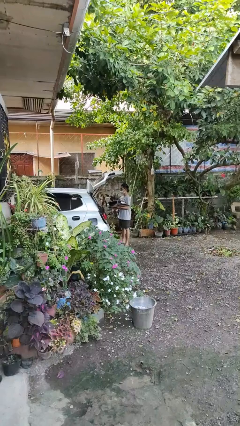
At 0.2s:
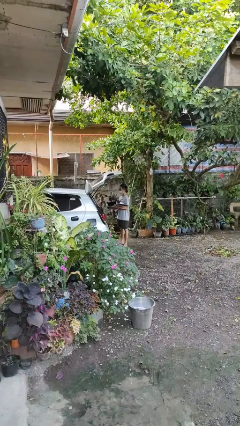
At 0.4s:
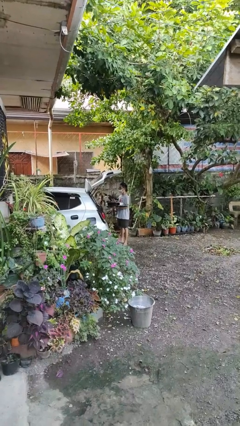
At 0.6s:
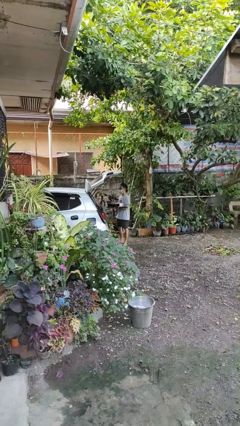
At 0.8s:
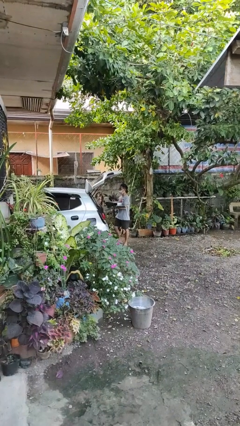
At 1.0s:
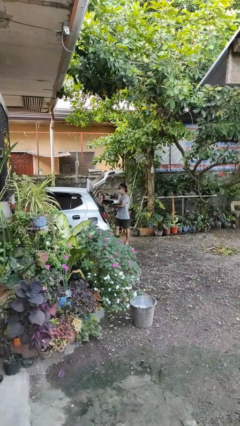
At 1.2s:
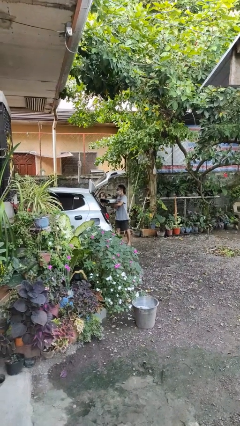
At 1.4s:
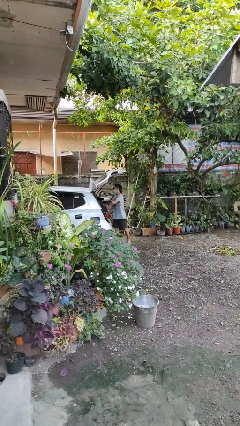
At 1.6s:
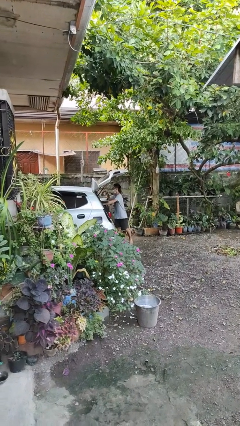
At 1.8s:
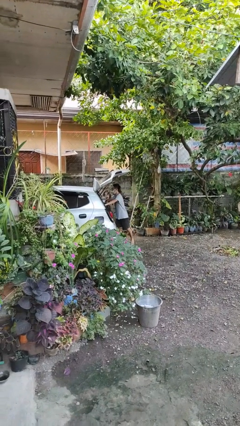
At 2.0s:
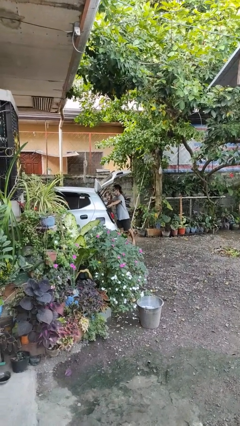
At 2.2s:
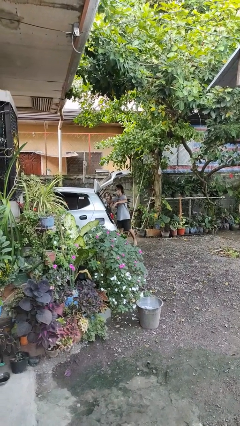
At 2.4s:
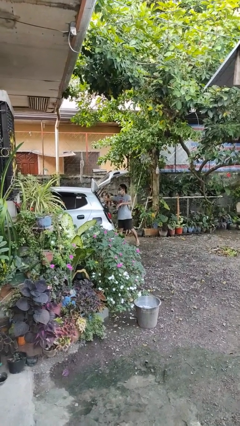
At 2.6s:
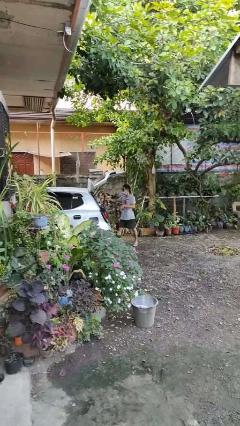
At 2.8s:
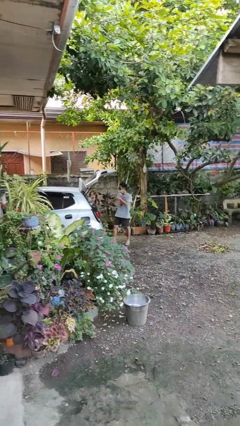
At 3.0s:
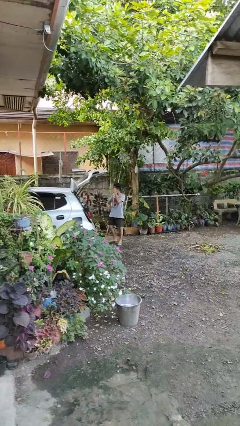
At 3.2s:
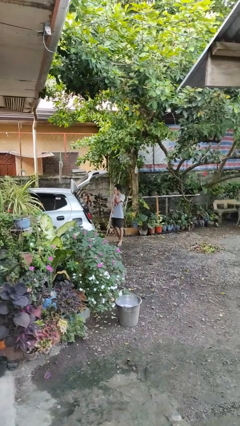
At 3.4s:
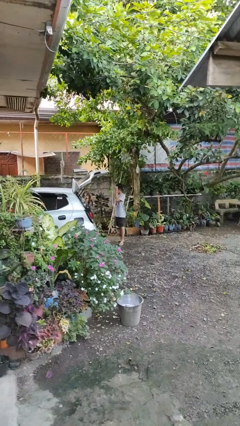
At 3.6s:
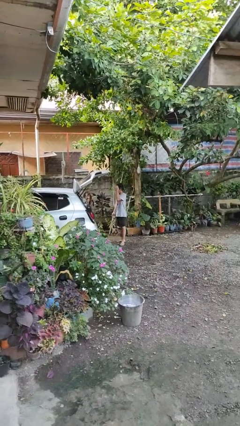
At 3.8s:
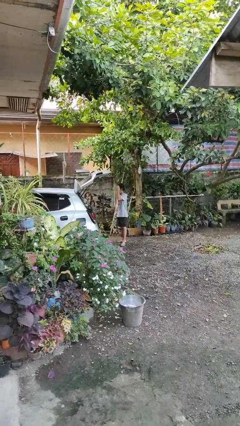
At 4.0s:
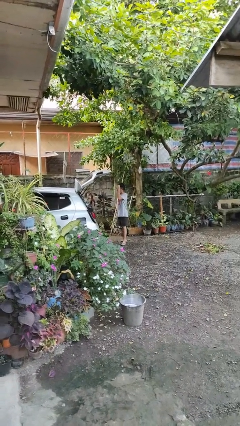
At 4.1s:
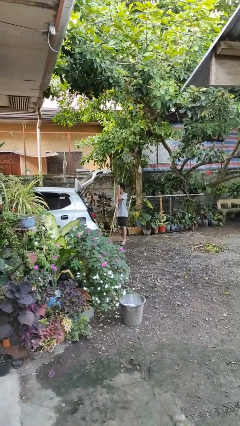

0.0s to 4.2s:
person loads car

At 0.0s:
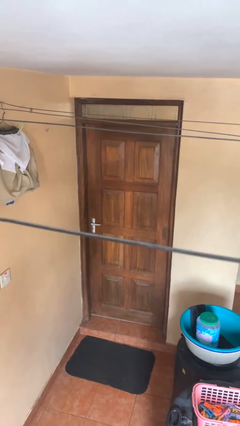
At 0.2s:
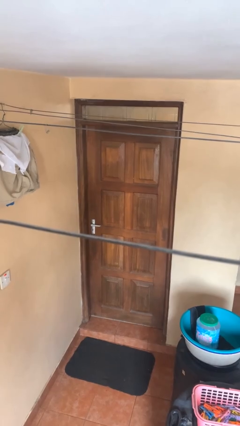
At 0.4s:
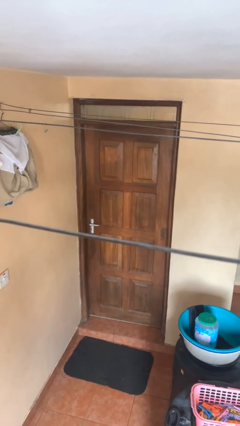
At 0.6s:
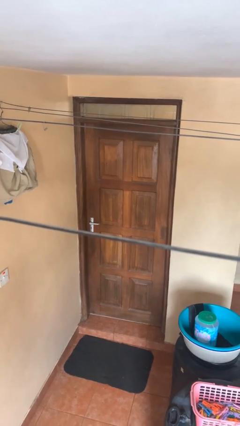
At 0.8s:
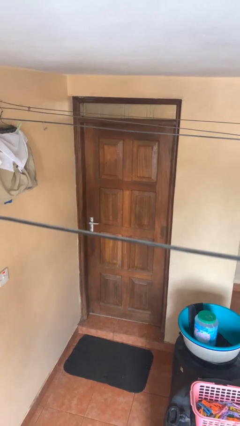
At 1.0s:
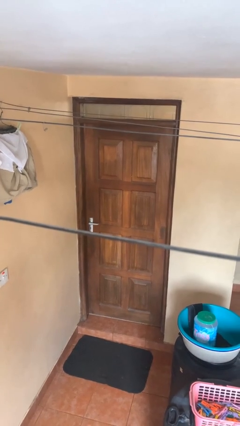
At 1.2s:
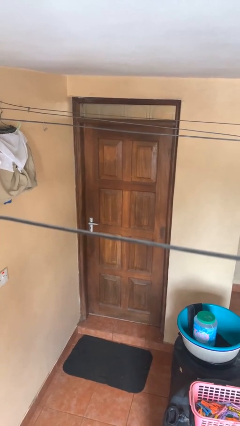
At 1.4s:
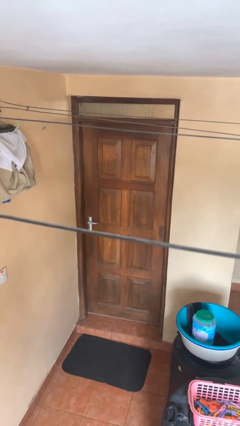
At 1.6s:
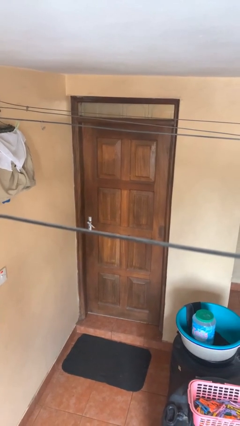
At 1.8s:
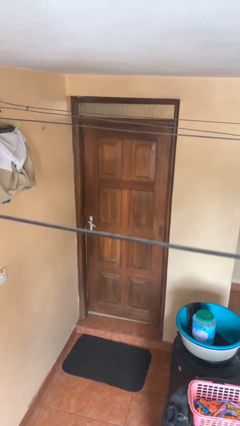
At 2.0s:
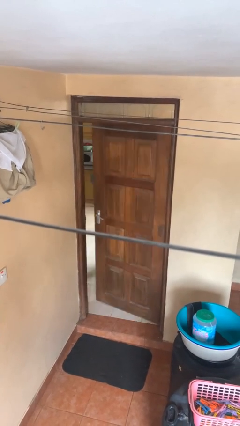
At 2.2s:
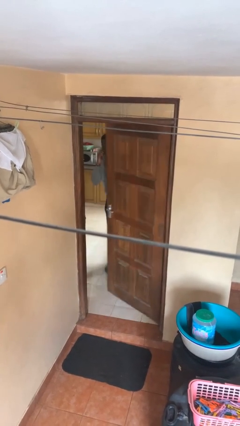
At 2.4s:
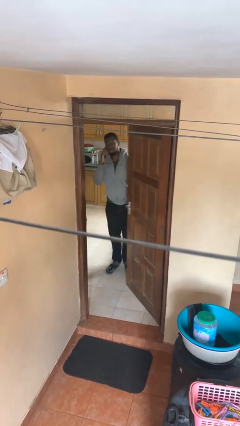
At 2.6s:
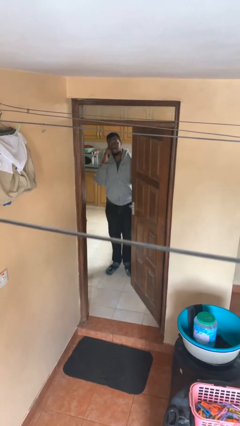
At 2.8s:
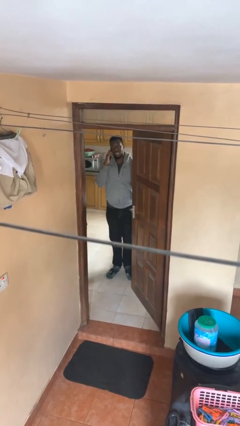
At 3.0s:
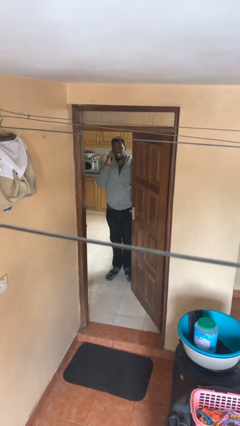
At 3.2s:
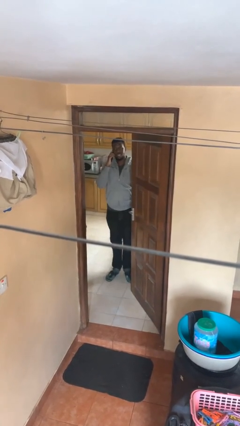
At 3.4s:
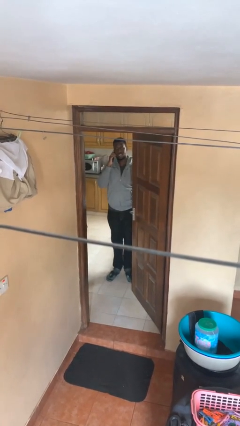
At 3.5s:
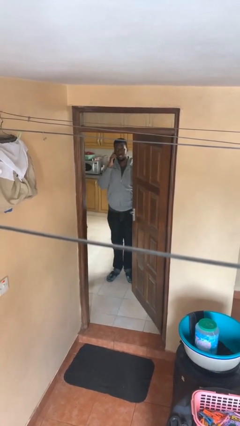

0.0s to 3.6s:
person opens facility door

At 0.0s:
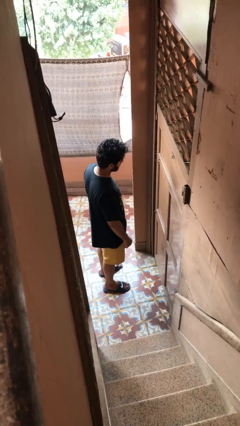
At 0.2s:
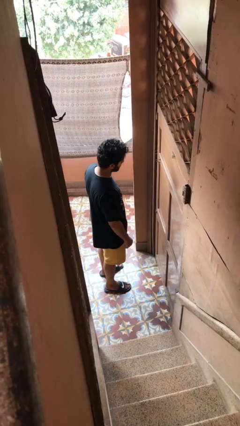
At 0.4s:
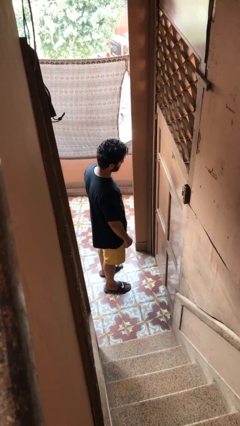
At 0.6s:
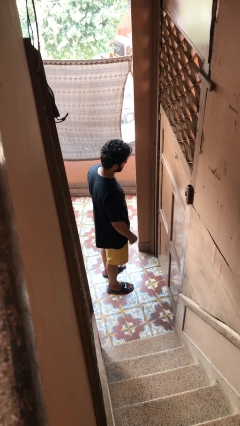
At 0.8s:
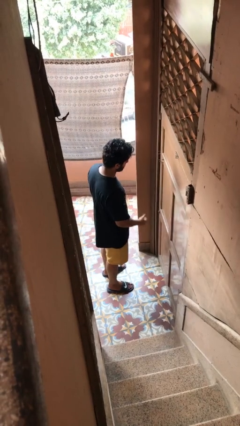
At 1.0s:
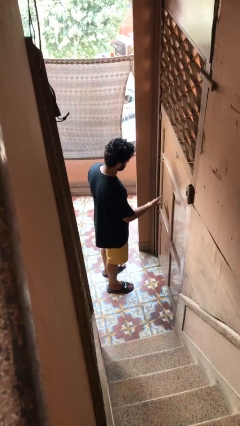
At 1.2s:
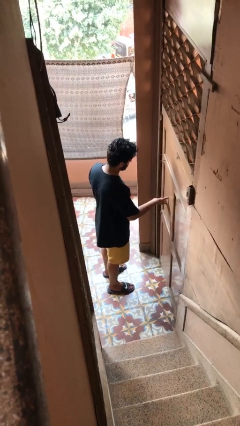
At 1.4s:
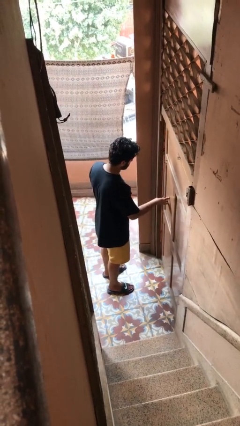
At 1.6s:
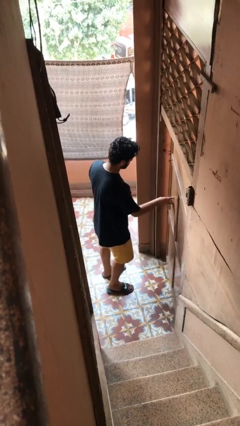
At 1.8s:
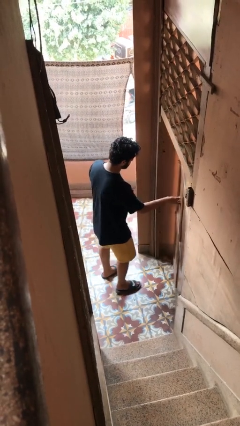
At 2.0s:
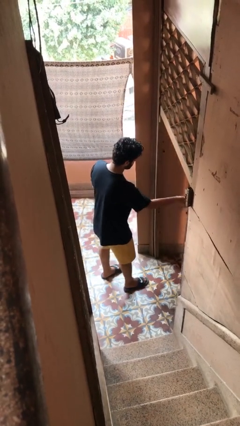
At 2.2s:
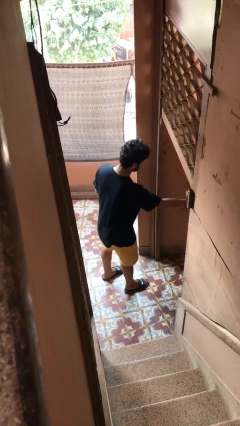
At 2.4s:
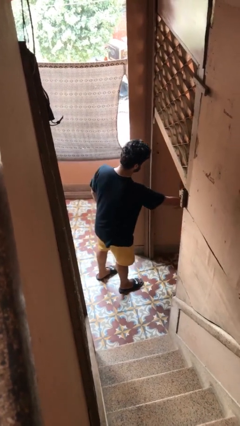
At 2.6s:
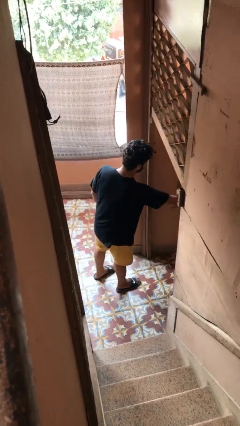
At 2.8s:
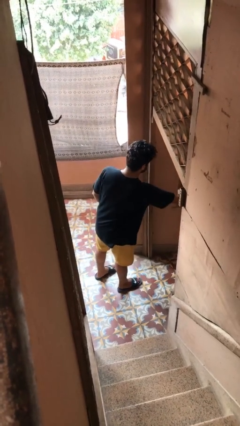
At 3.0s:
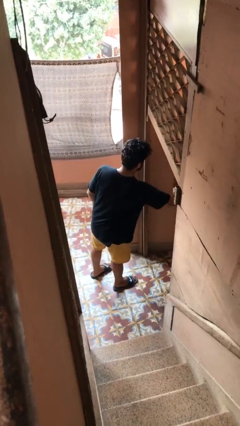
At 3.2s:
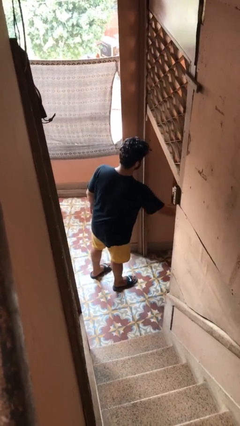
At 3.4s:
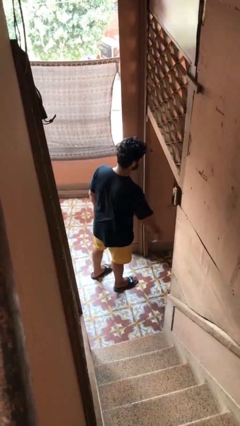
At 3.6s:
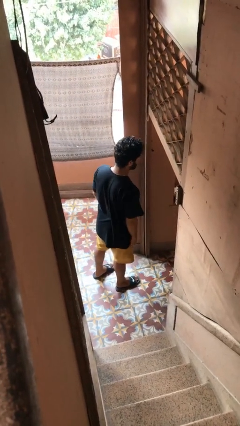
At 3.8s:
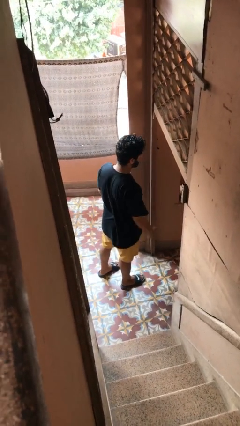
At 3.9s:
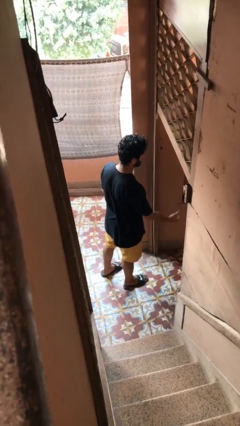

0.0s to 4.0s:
person opens gate

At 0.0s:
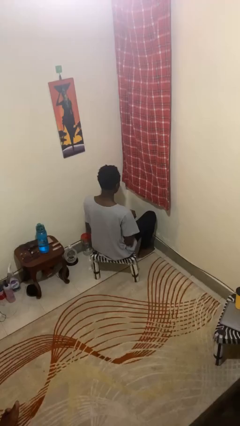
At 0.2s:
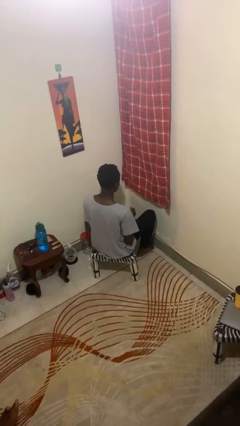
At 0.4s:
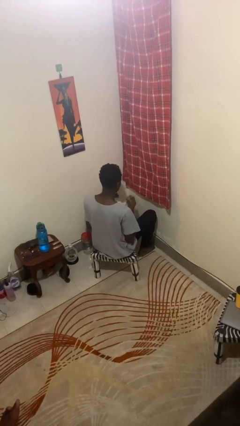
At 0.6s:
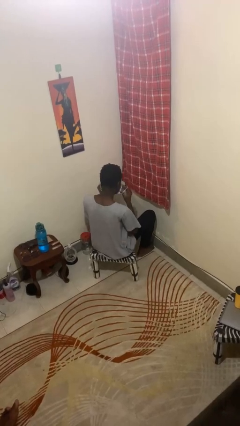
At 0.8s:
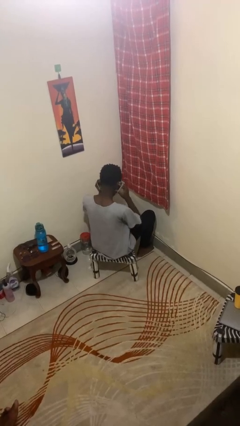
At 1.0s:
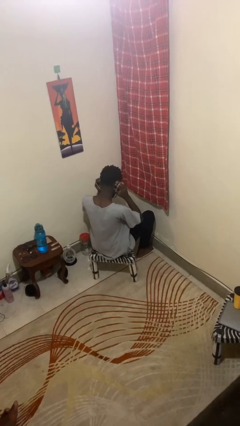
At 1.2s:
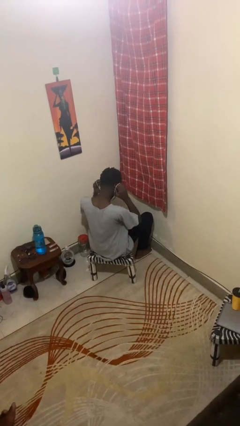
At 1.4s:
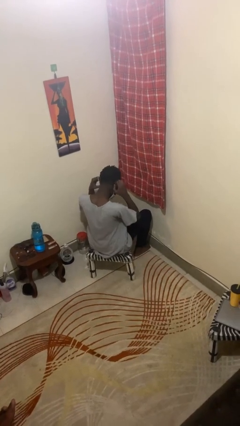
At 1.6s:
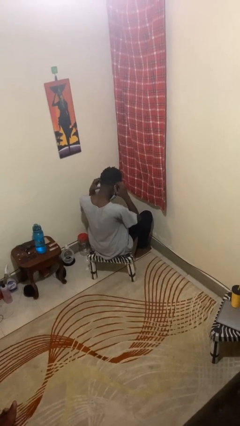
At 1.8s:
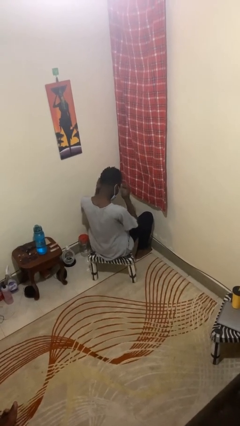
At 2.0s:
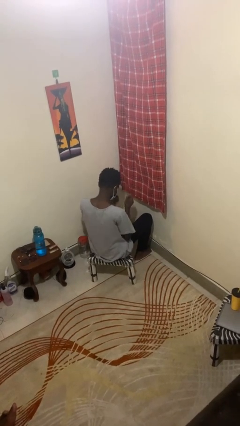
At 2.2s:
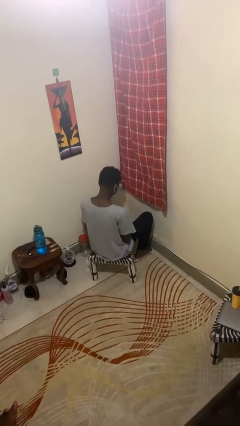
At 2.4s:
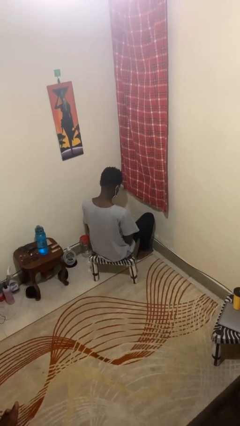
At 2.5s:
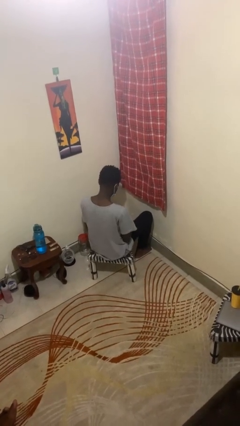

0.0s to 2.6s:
person puts on facemask

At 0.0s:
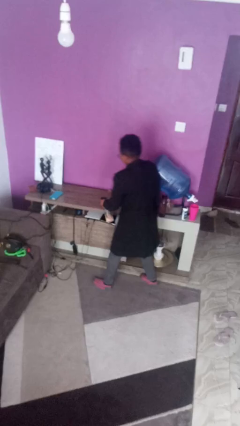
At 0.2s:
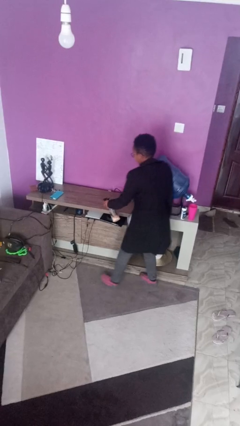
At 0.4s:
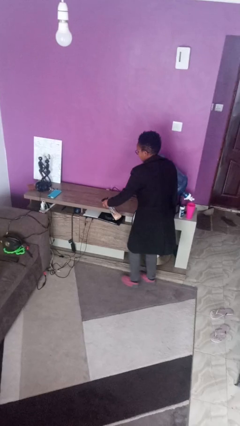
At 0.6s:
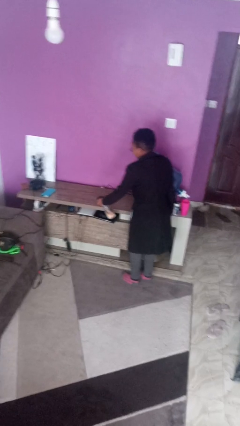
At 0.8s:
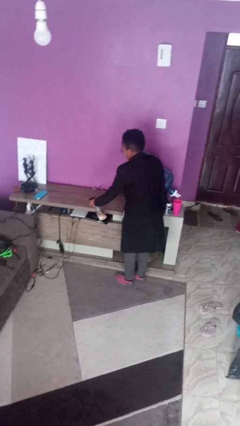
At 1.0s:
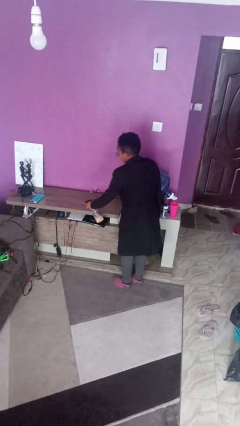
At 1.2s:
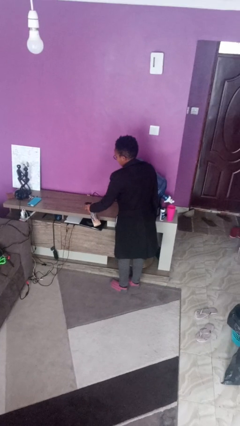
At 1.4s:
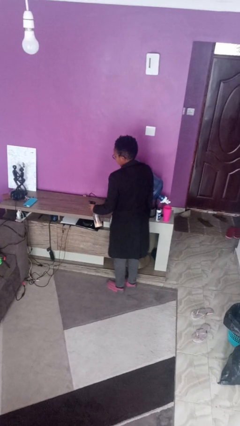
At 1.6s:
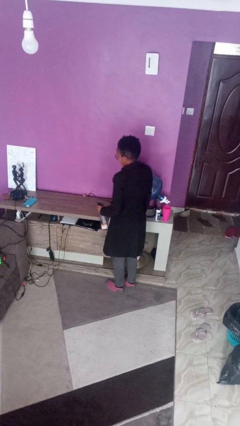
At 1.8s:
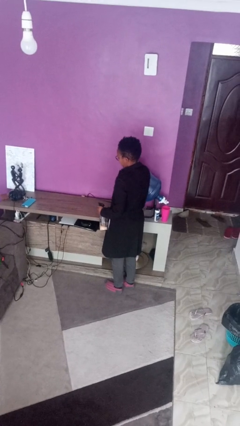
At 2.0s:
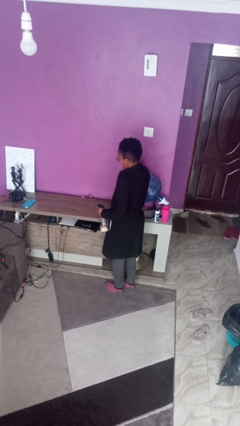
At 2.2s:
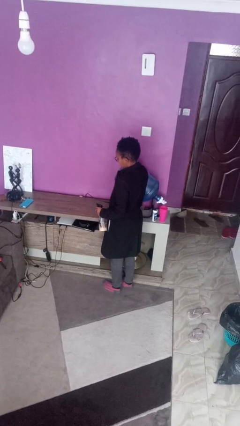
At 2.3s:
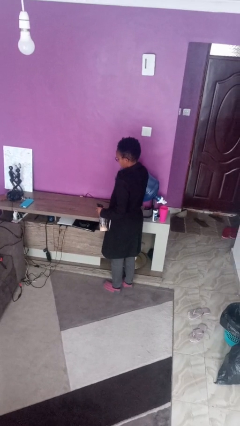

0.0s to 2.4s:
person sprays from bottle

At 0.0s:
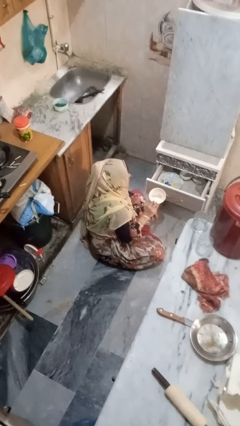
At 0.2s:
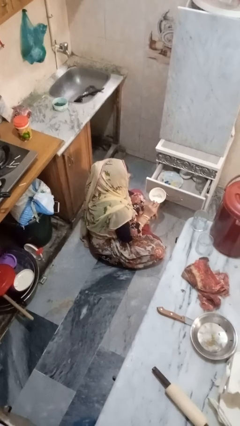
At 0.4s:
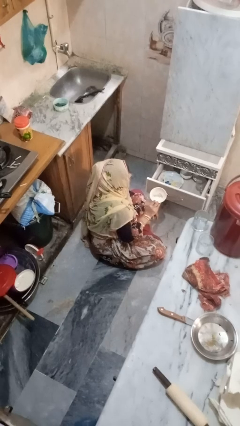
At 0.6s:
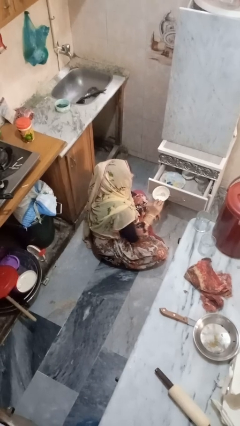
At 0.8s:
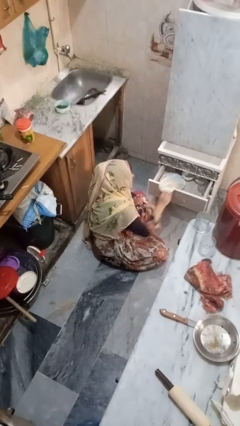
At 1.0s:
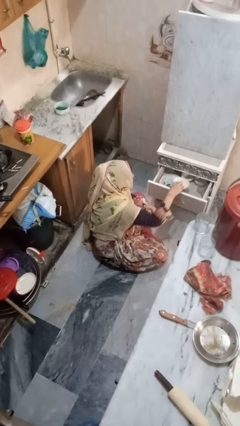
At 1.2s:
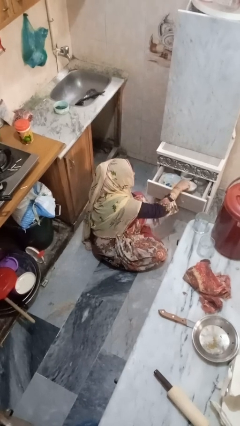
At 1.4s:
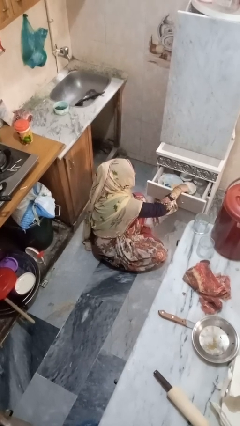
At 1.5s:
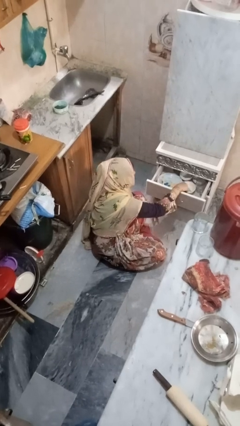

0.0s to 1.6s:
person puts object into kitchen drawer
